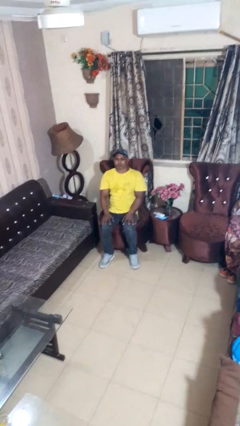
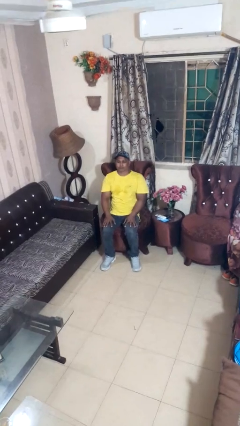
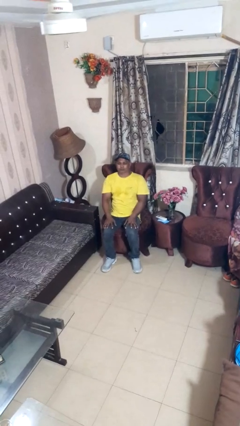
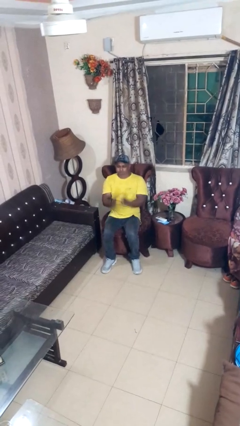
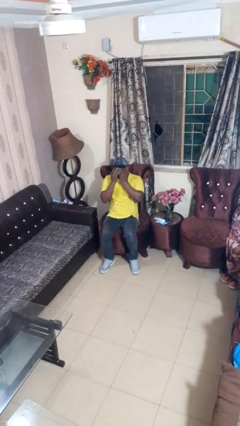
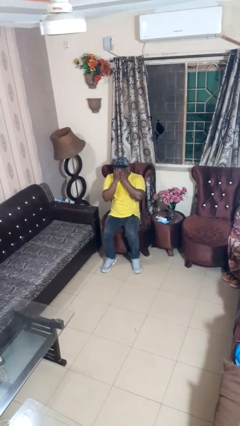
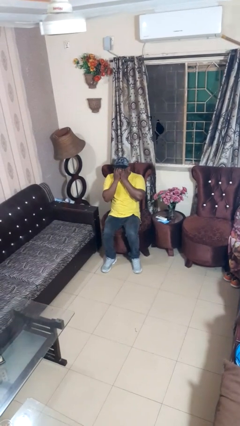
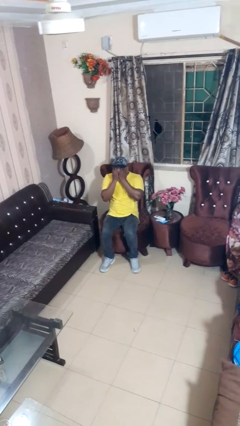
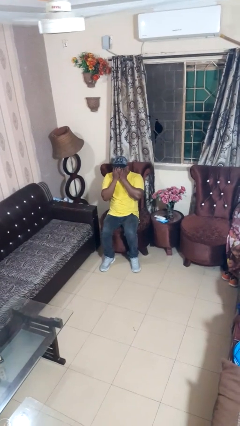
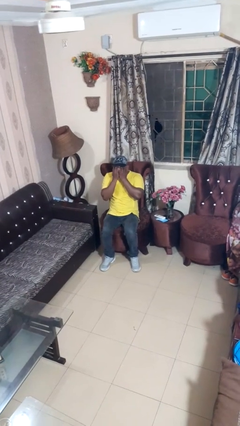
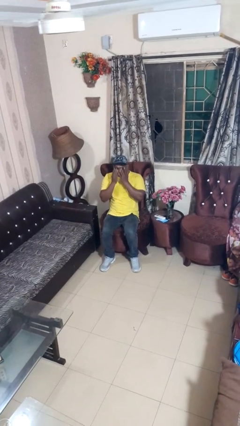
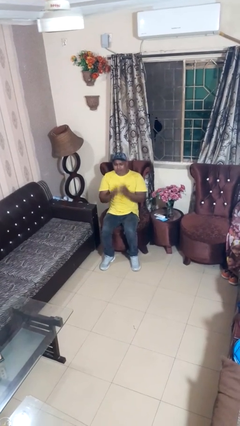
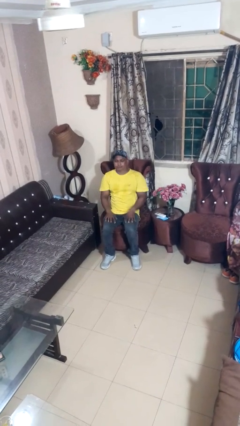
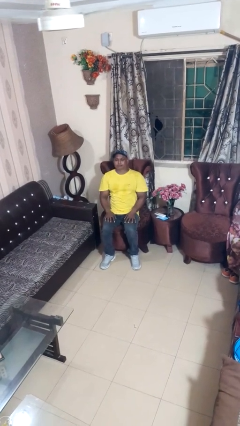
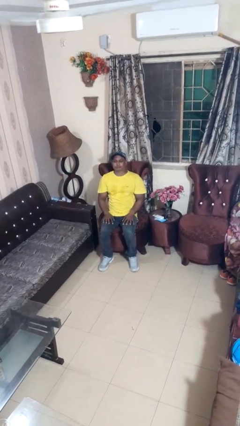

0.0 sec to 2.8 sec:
person covers face with hands

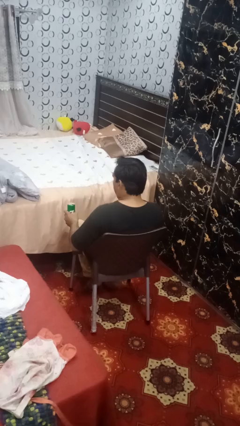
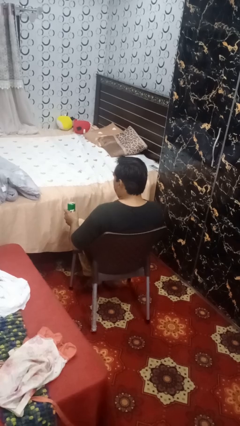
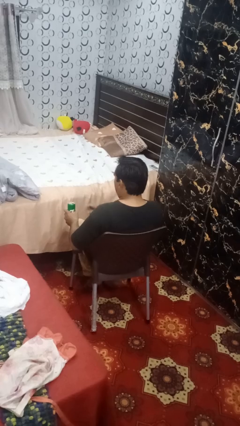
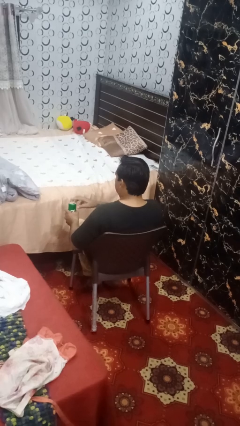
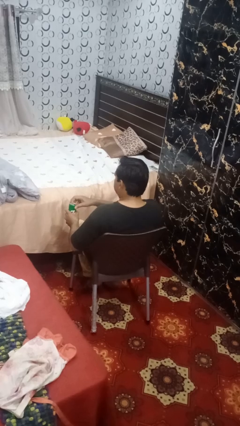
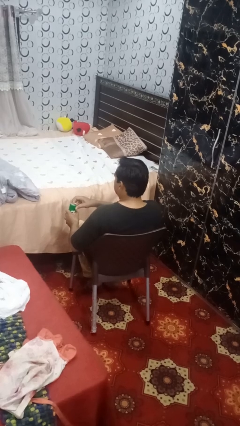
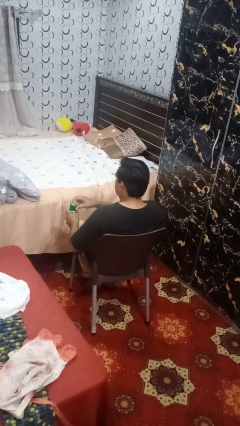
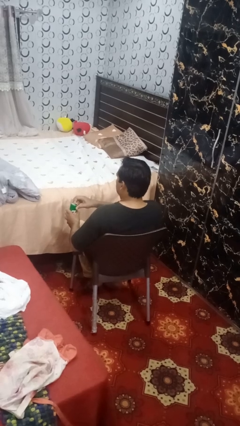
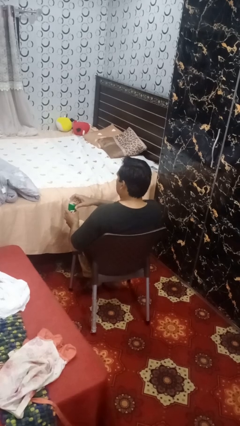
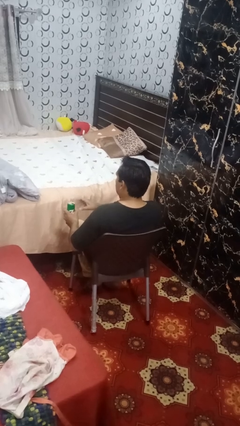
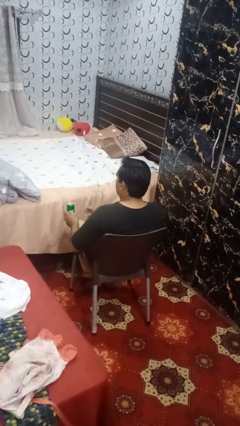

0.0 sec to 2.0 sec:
person opens beverage can

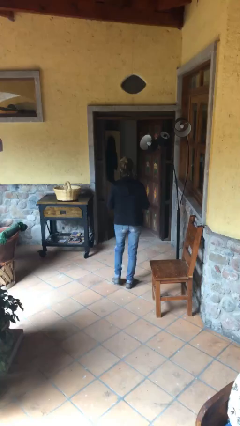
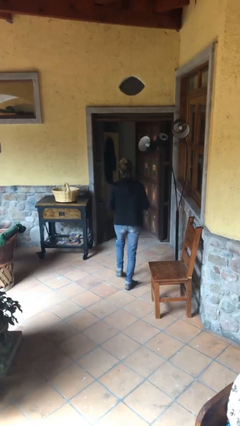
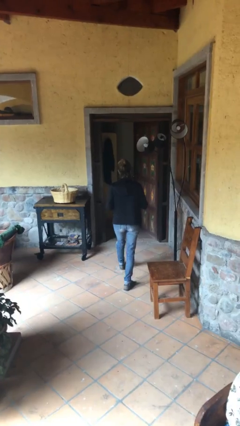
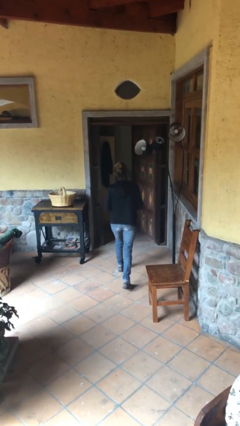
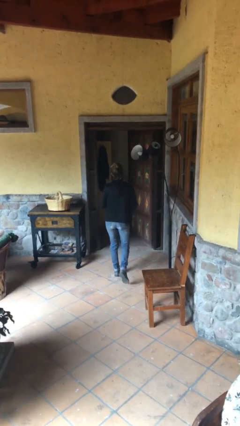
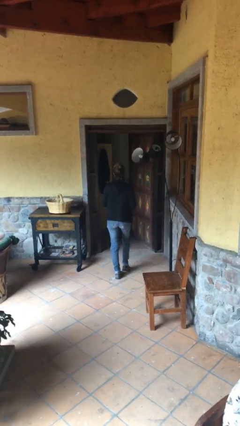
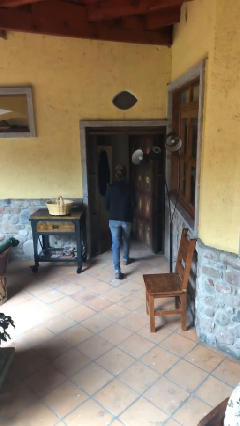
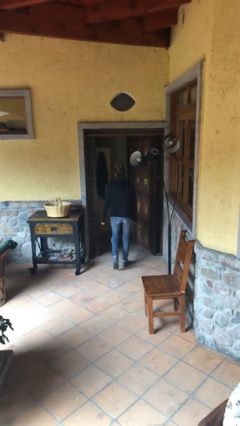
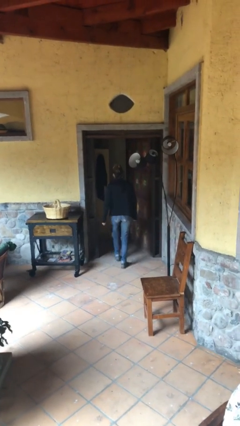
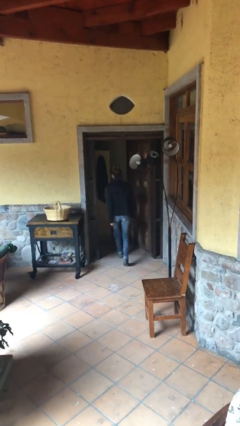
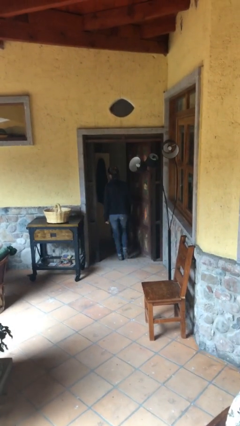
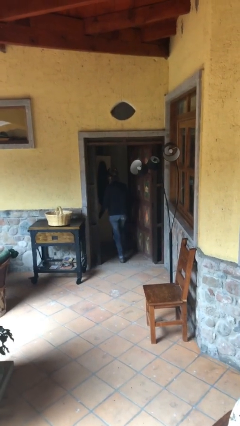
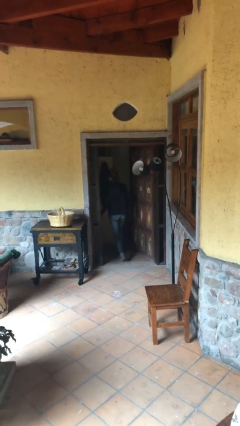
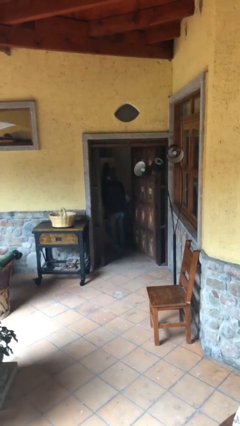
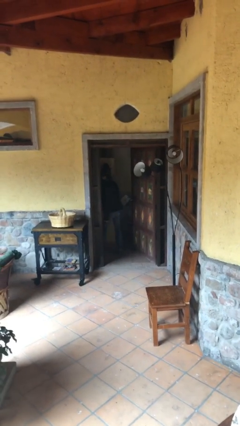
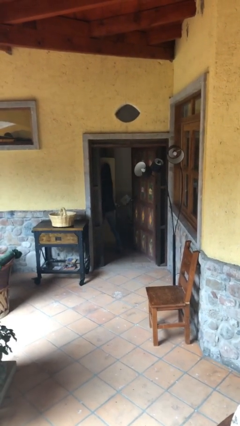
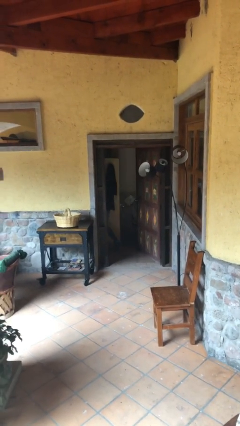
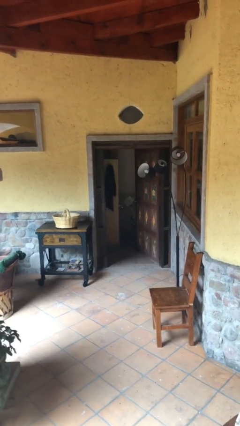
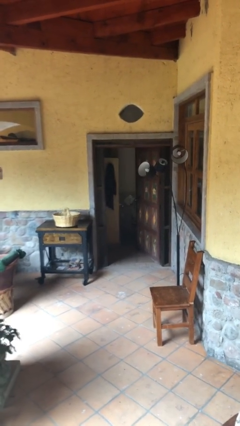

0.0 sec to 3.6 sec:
person exits scene through structure

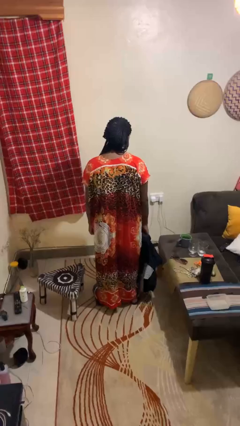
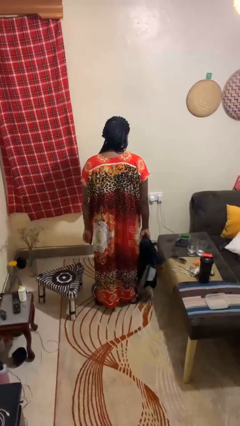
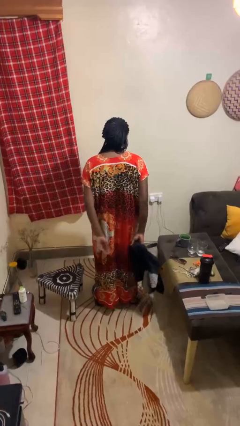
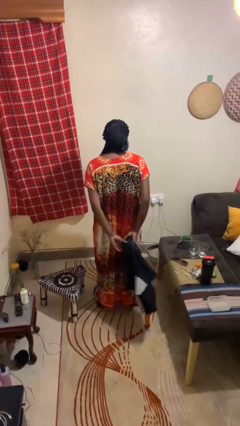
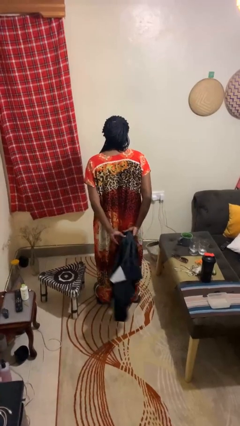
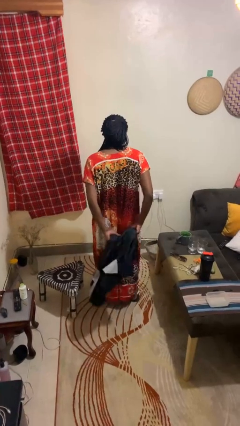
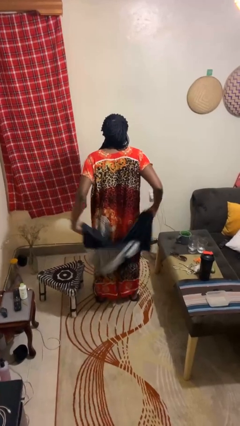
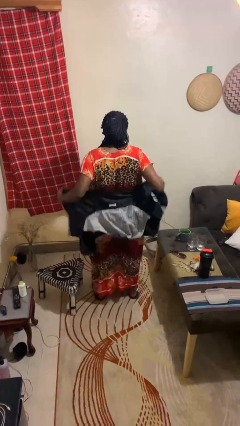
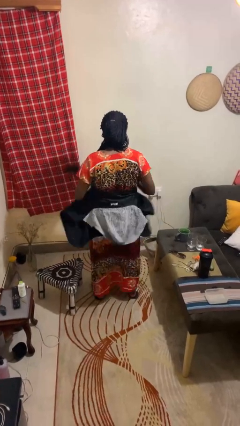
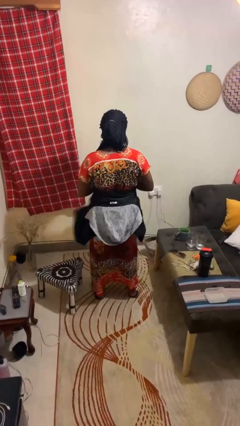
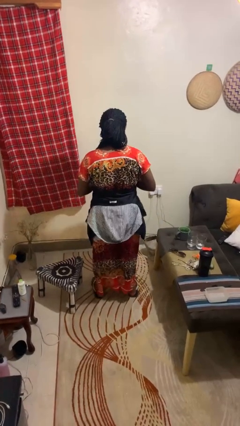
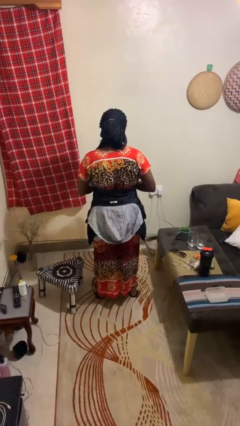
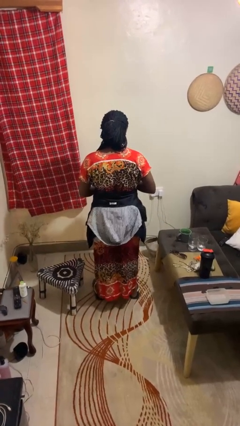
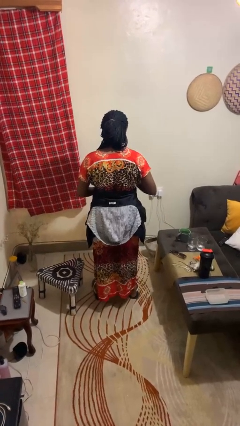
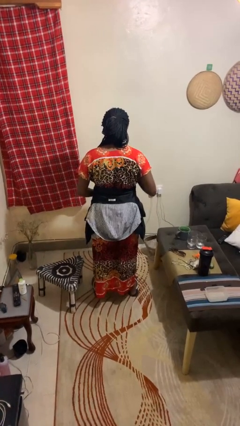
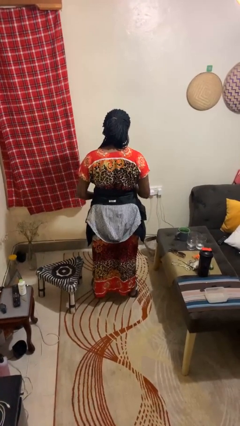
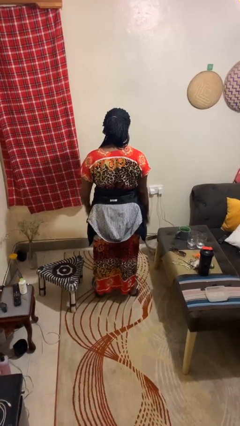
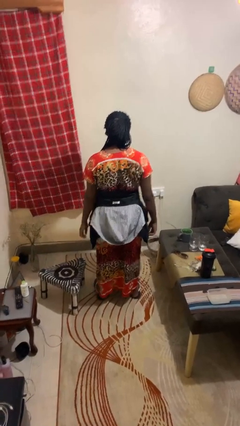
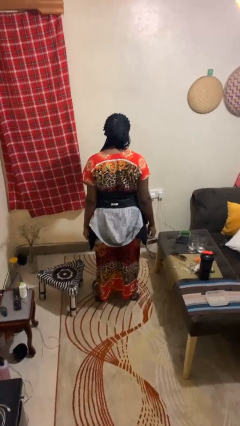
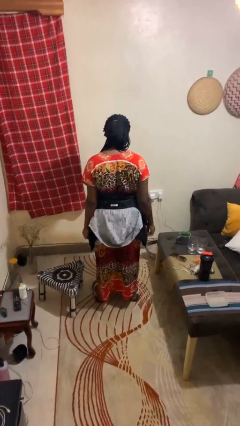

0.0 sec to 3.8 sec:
person ties jacket around waist

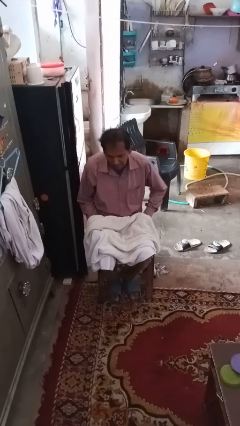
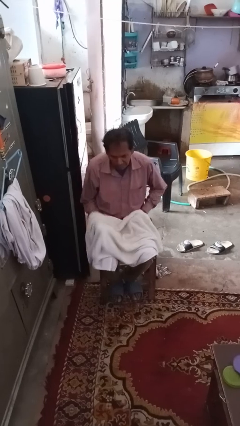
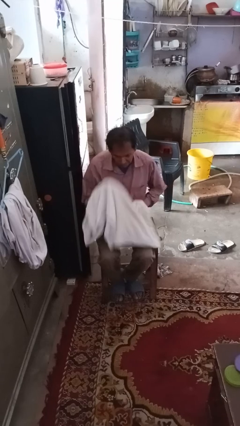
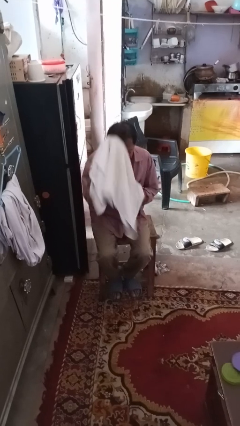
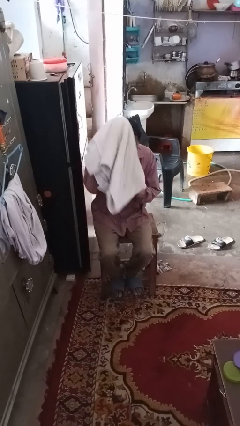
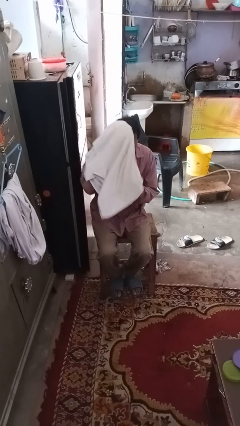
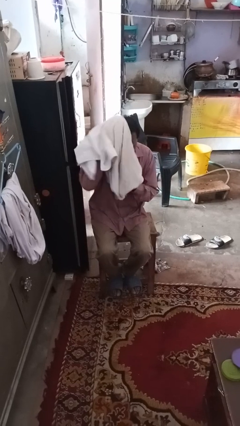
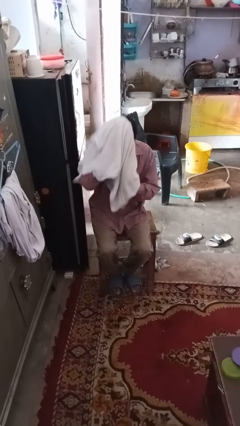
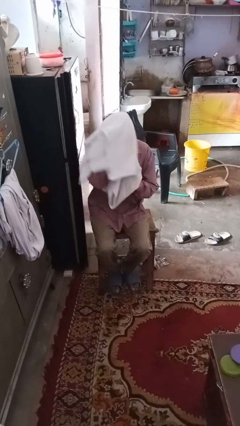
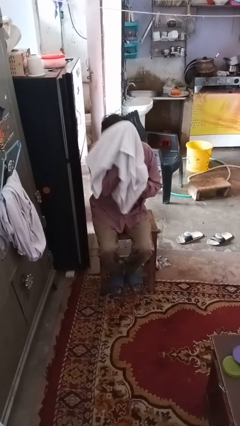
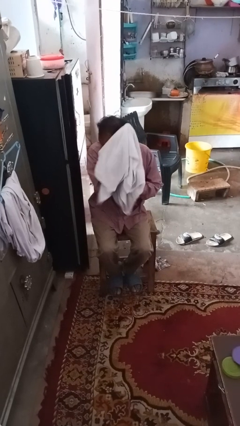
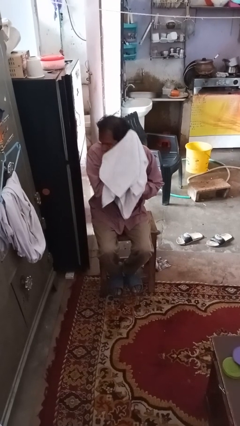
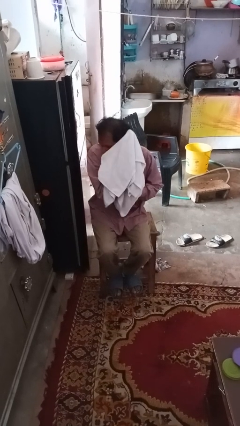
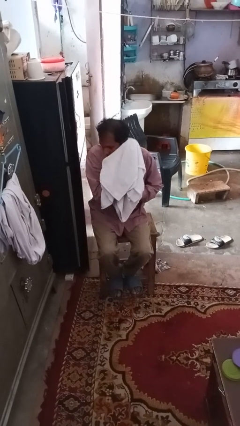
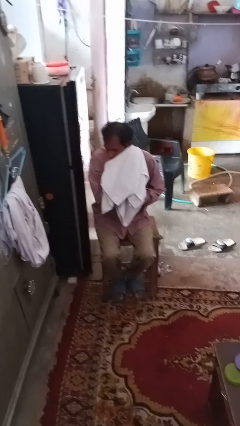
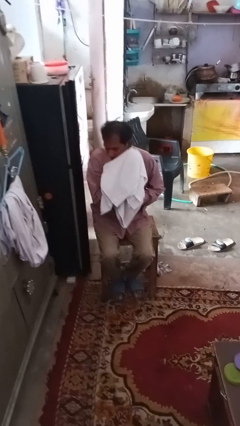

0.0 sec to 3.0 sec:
person dries hair with towel

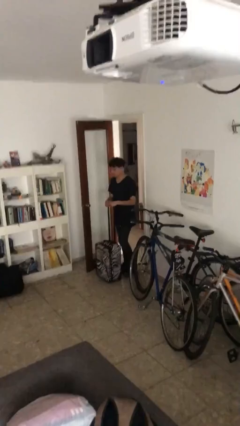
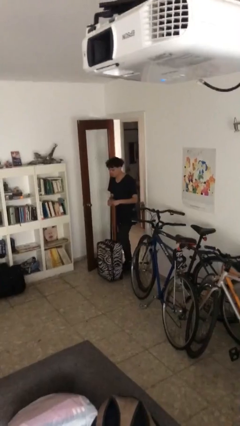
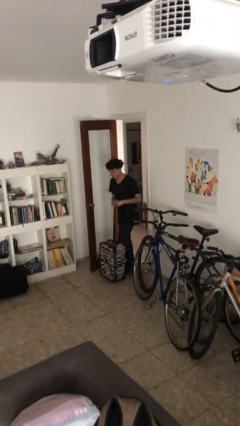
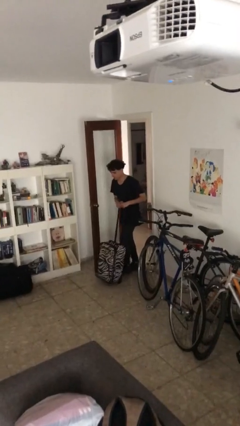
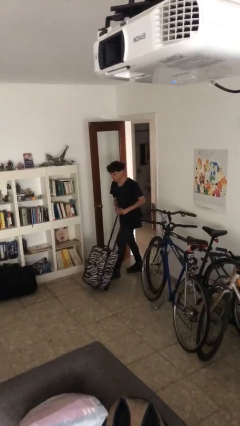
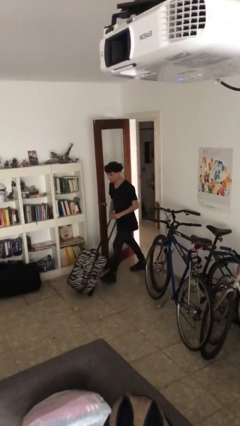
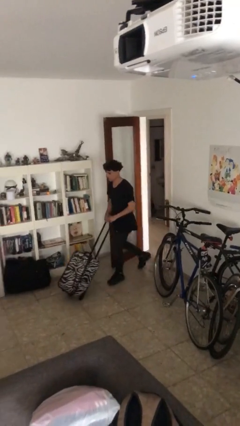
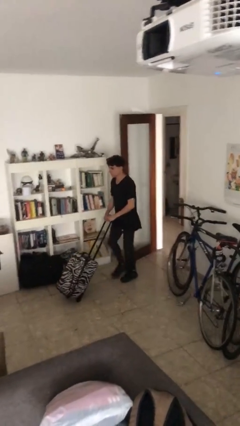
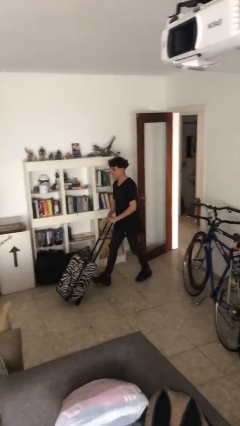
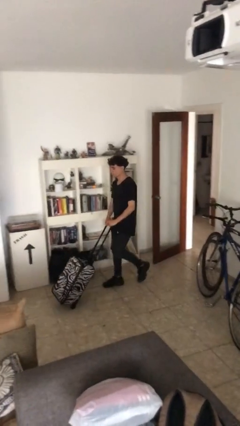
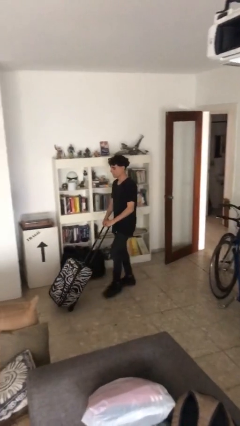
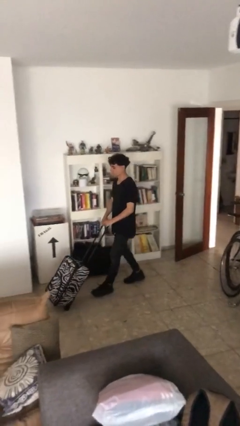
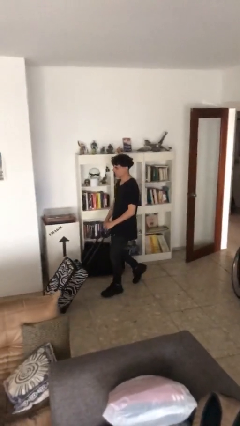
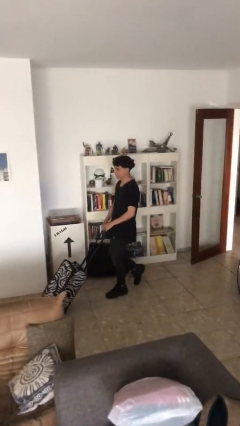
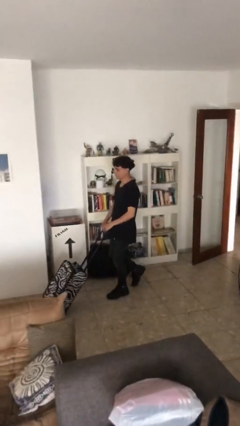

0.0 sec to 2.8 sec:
person pushes wheeled cart
